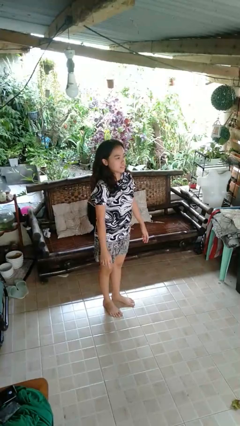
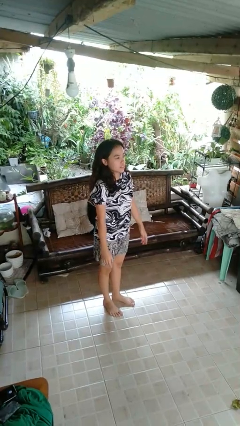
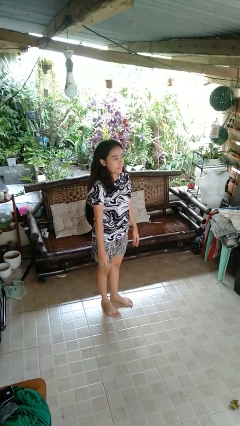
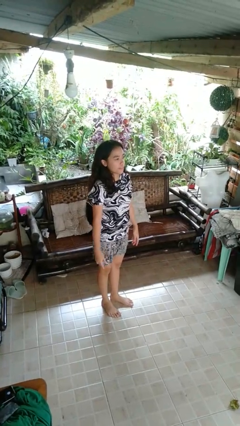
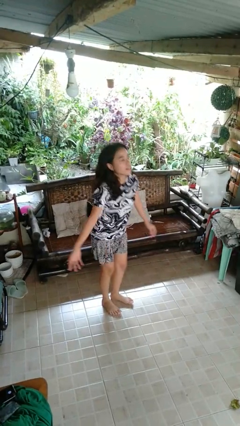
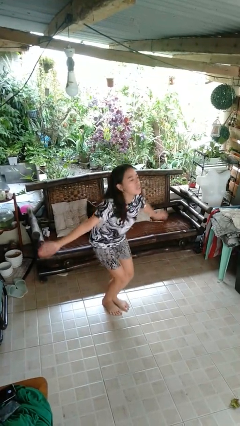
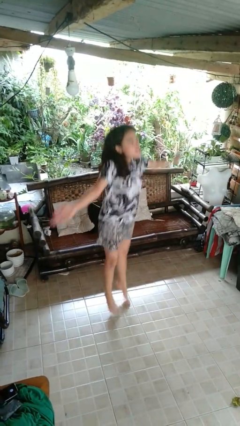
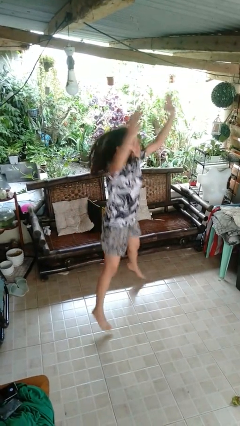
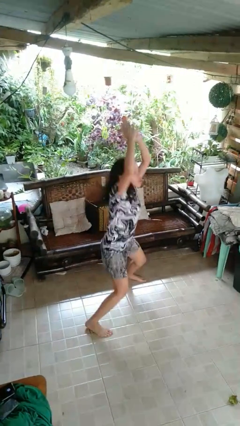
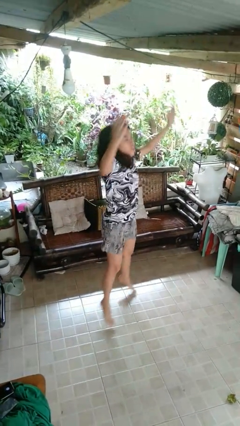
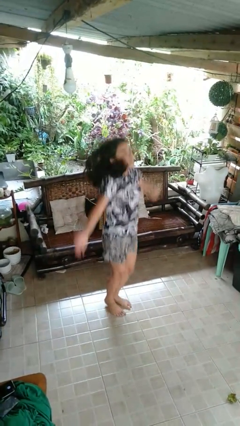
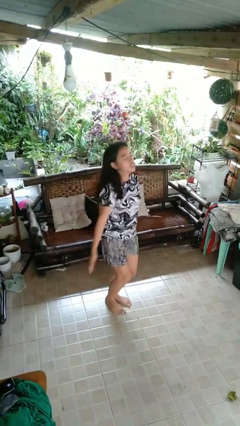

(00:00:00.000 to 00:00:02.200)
person exercises with jumping jacks

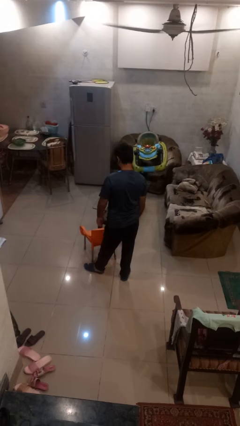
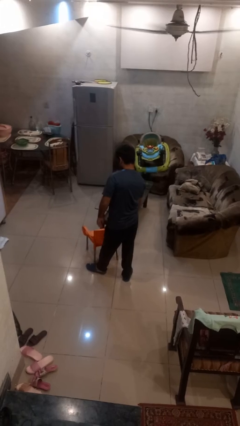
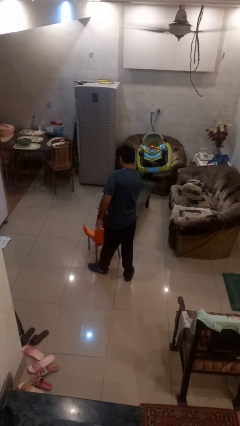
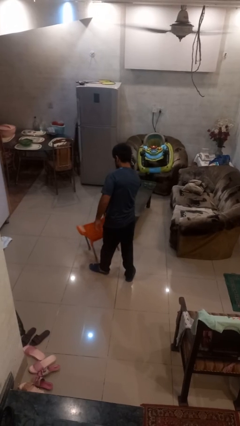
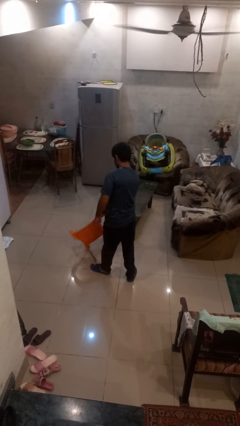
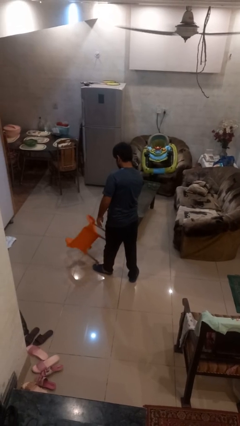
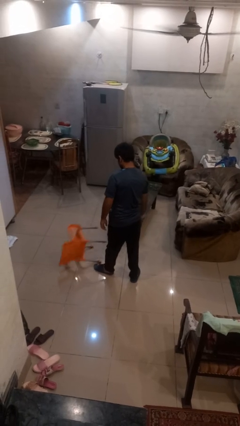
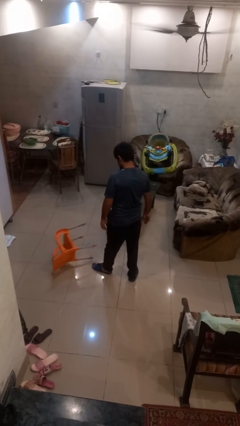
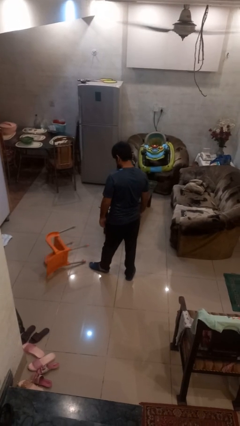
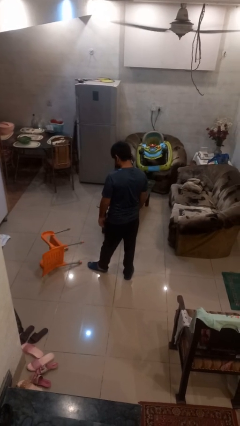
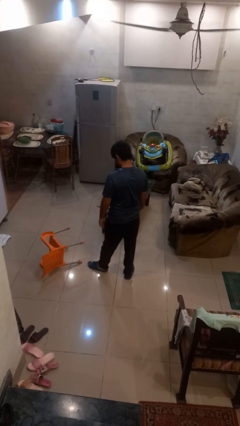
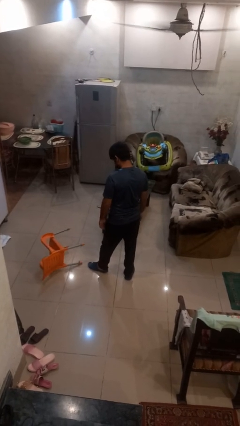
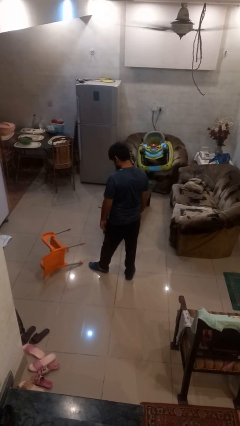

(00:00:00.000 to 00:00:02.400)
person knocks over furniture

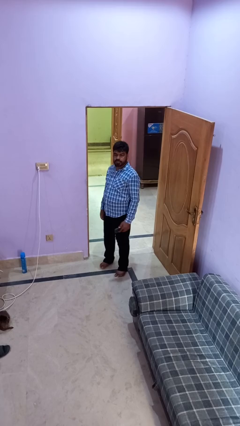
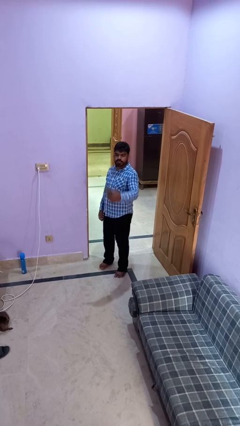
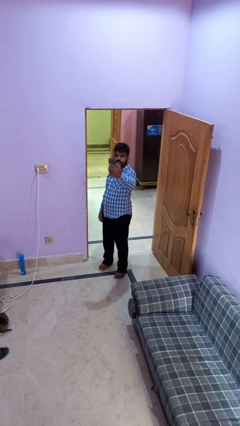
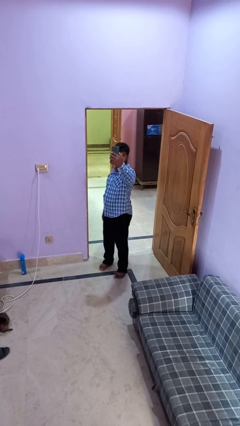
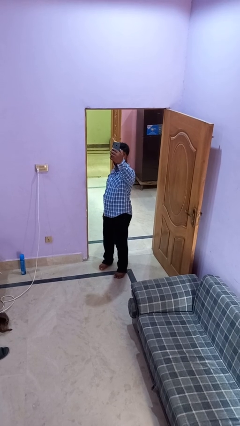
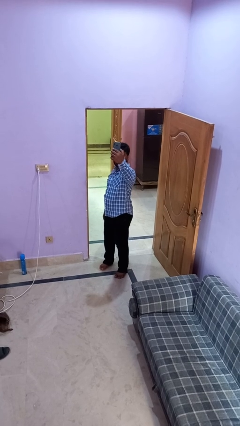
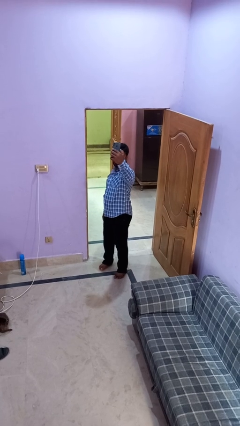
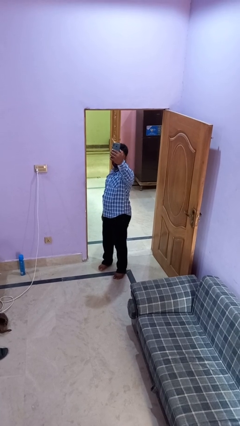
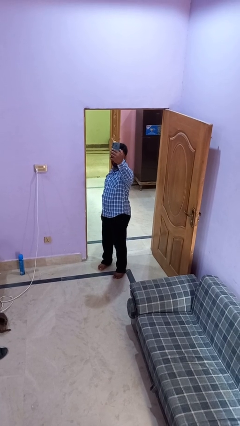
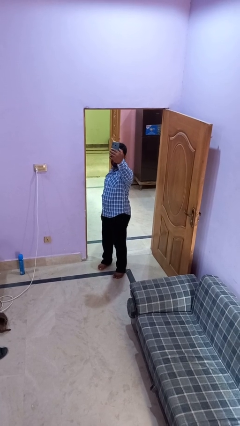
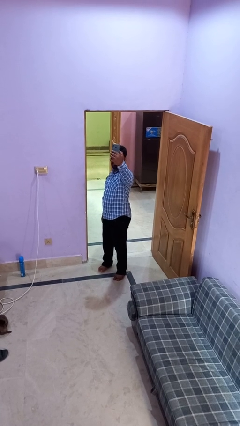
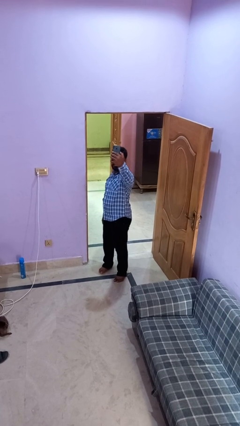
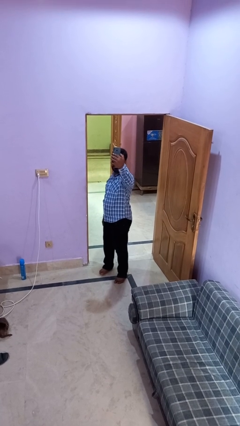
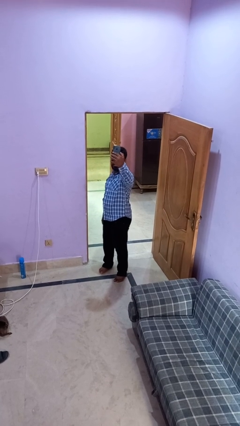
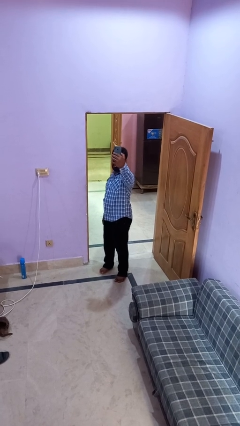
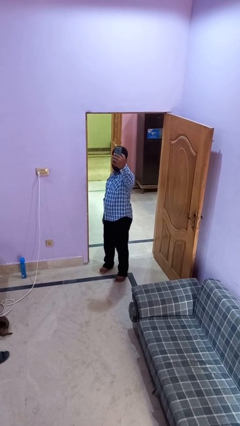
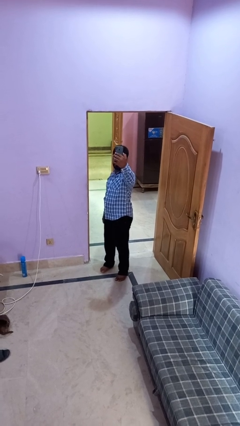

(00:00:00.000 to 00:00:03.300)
person takes selfie

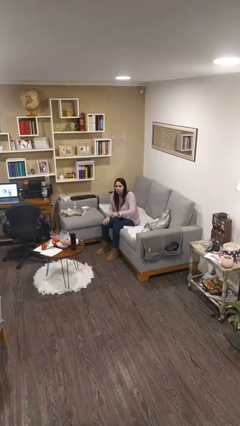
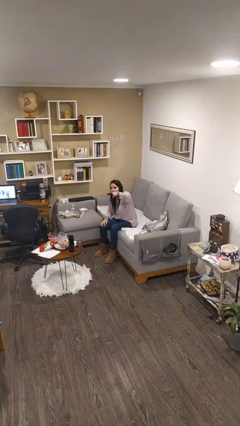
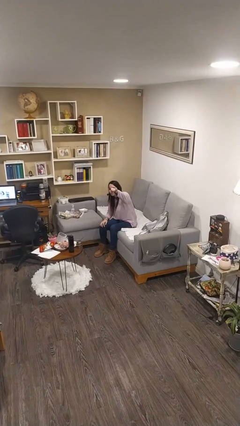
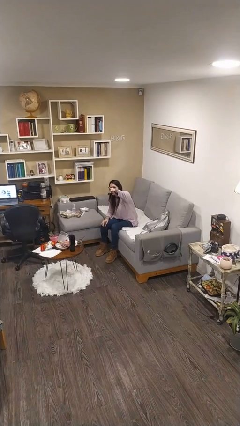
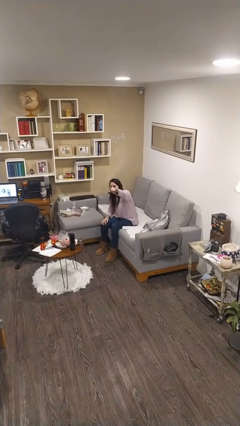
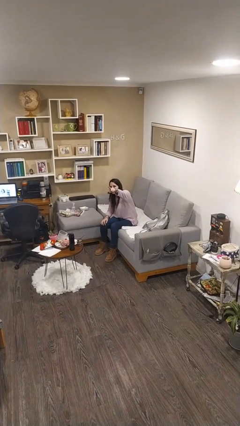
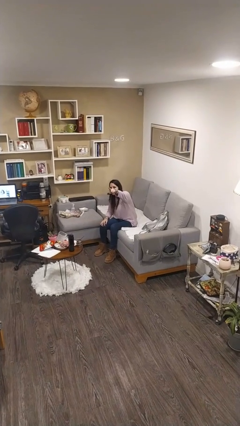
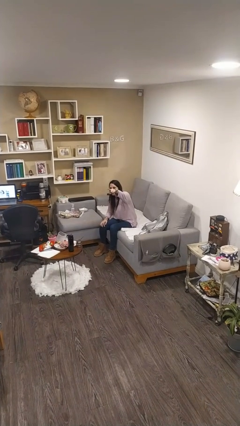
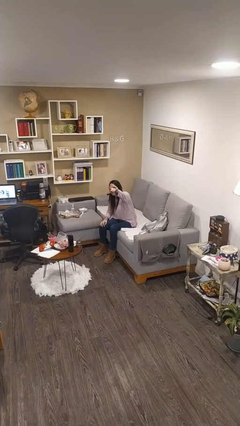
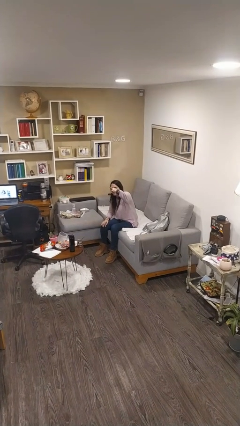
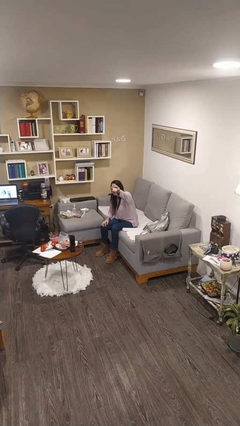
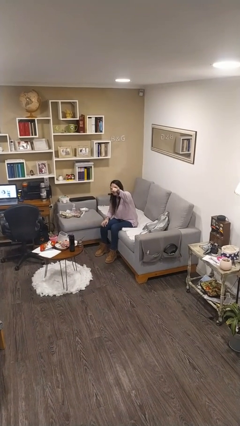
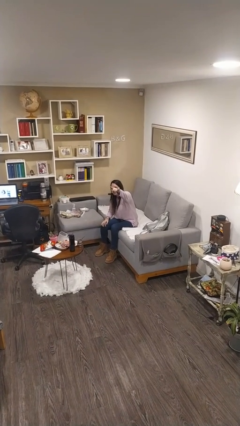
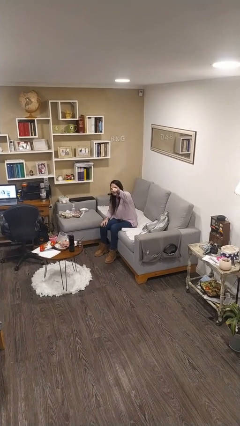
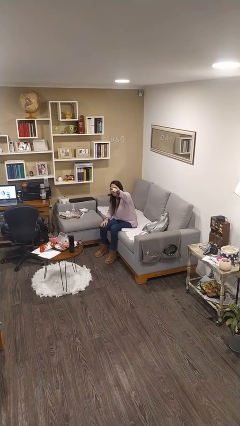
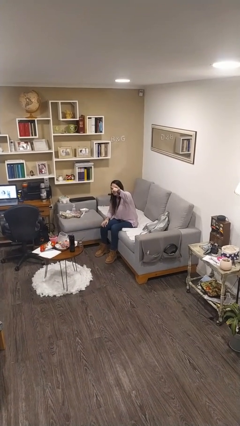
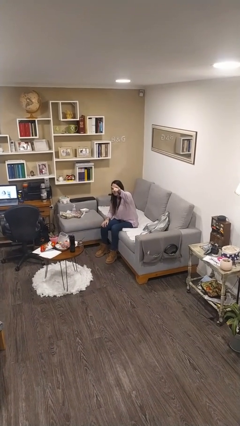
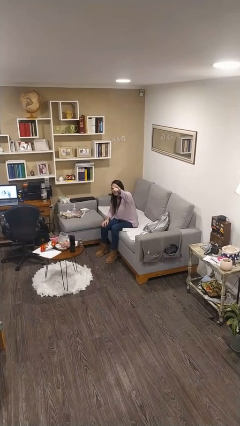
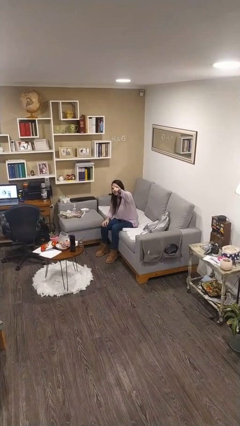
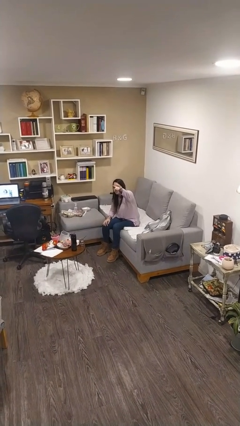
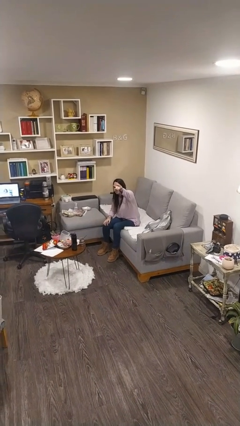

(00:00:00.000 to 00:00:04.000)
person points at person

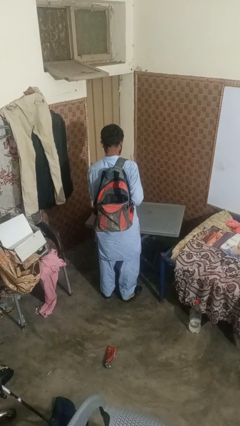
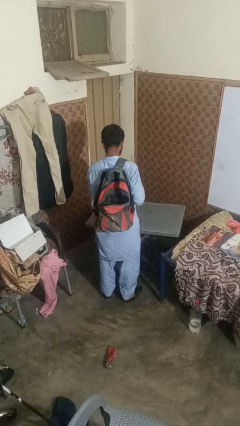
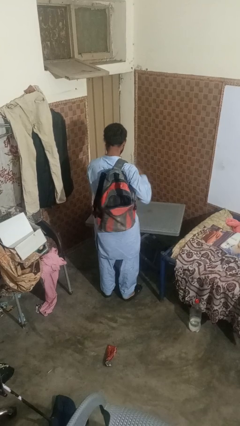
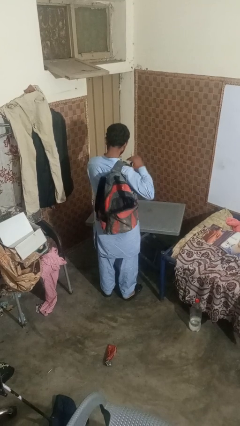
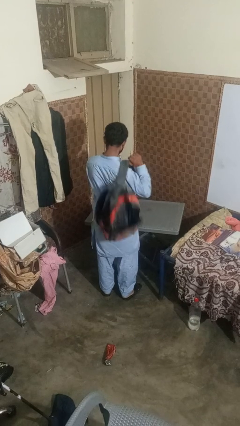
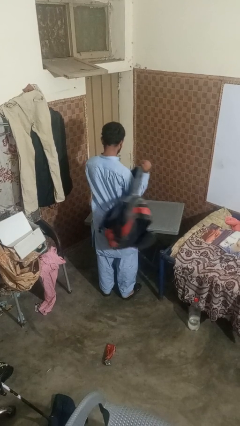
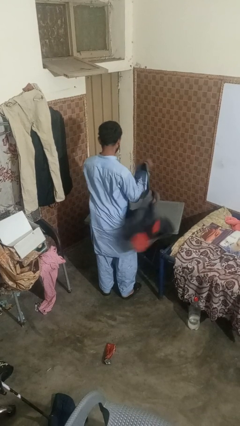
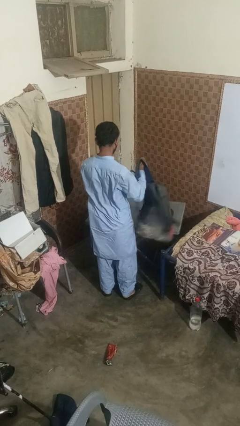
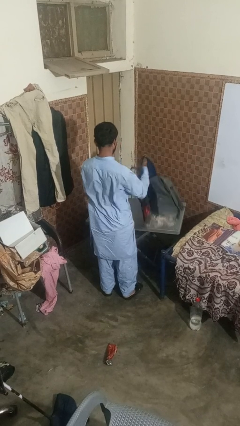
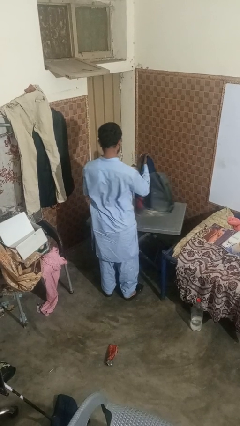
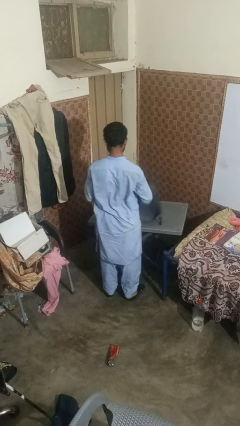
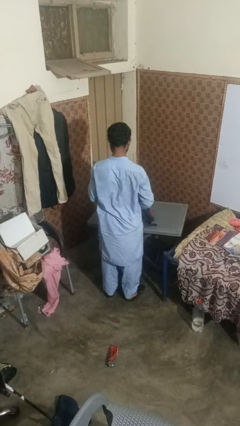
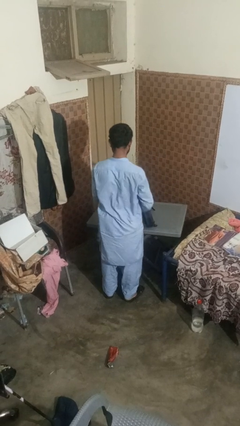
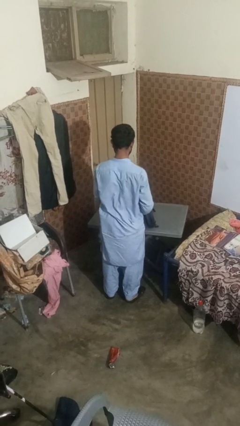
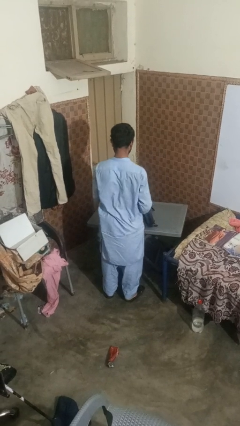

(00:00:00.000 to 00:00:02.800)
person takes off backpack

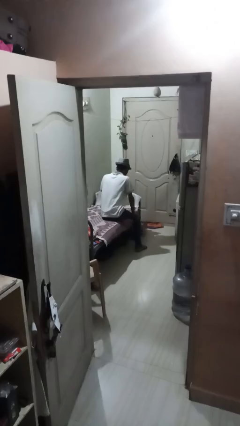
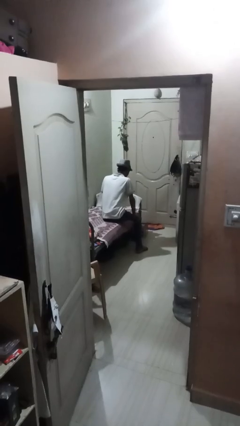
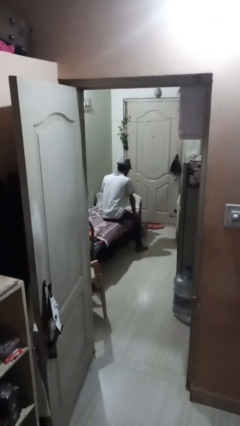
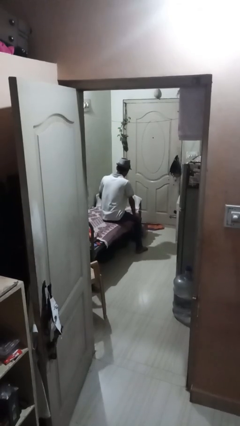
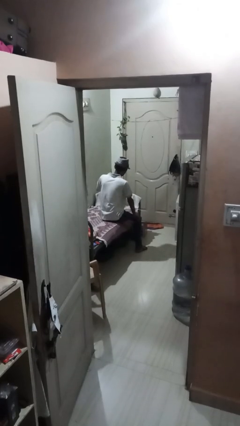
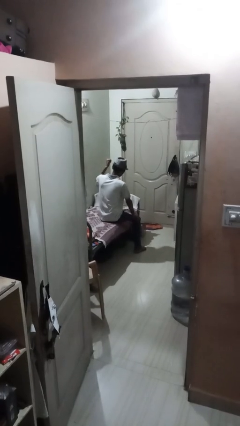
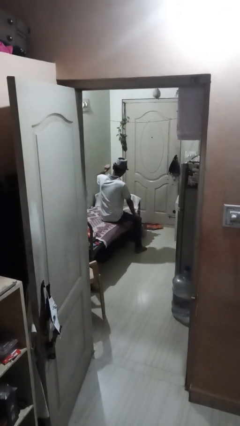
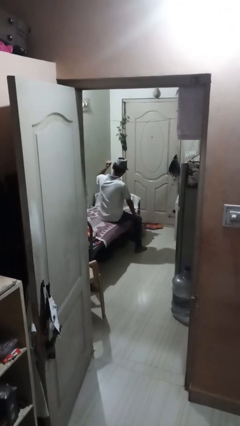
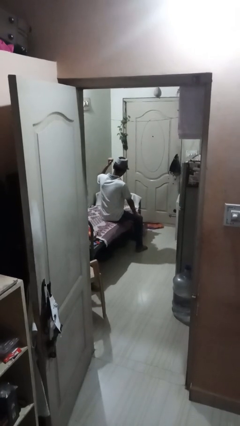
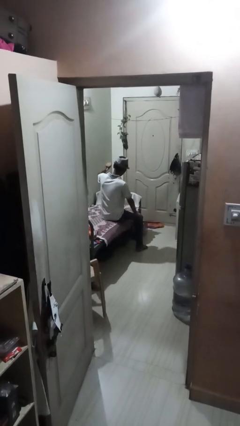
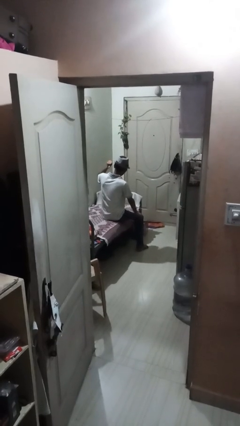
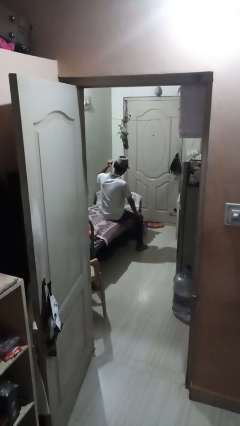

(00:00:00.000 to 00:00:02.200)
person gestures behind me
